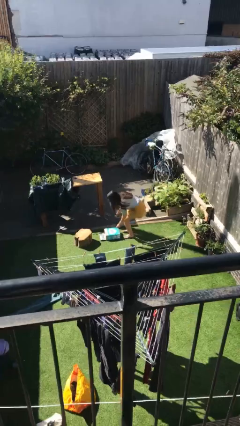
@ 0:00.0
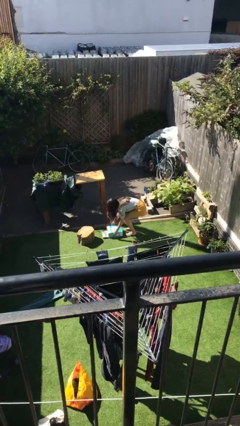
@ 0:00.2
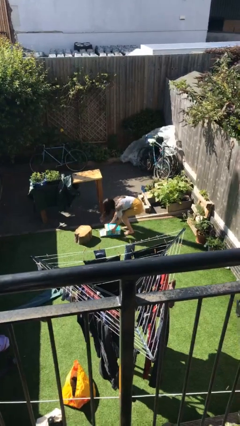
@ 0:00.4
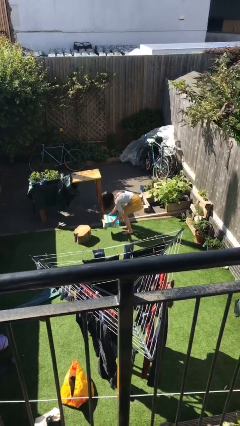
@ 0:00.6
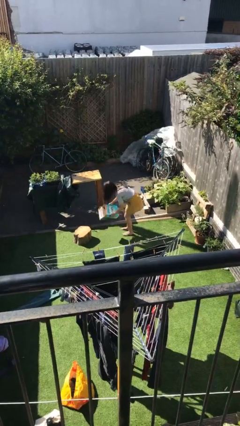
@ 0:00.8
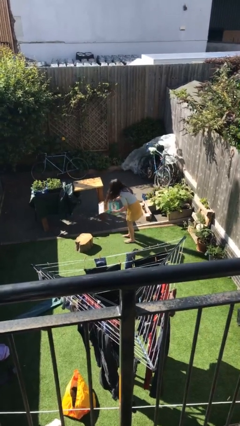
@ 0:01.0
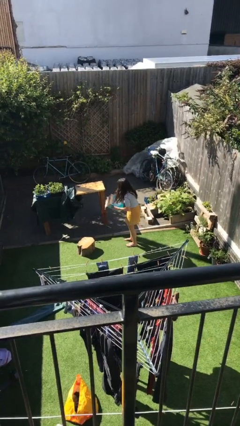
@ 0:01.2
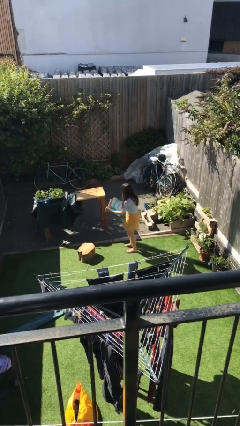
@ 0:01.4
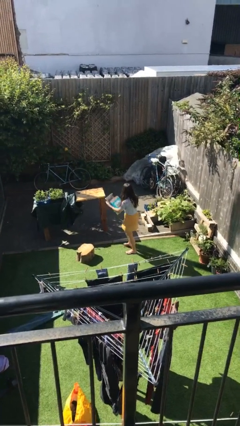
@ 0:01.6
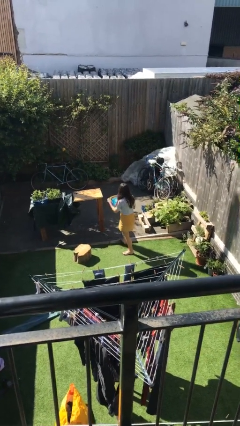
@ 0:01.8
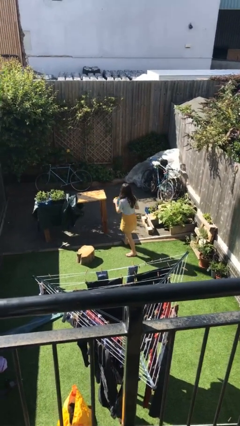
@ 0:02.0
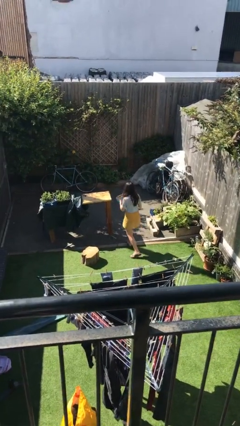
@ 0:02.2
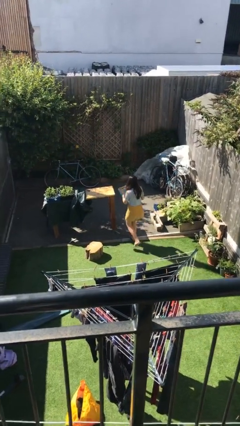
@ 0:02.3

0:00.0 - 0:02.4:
person picks up object from floor

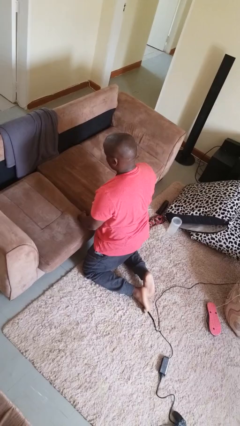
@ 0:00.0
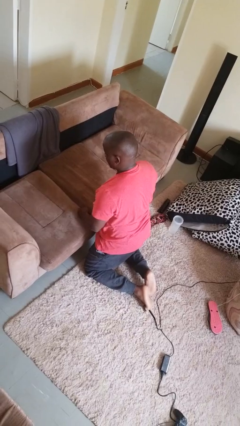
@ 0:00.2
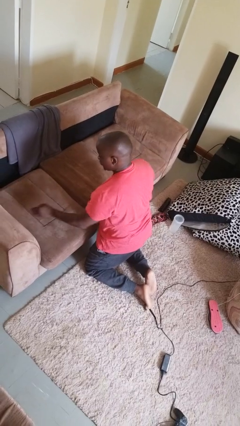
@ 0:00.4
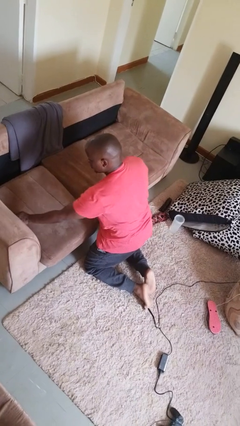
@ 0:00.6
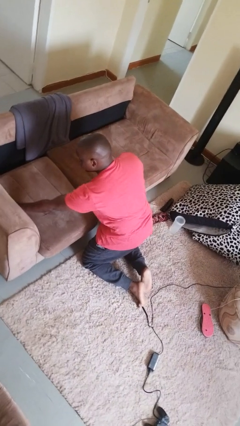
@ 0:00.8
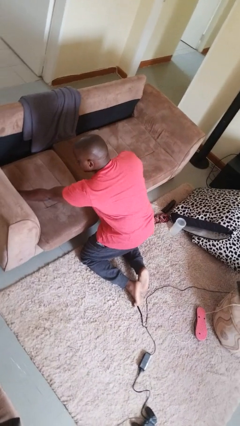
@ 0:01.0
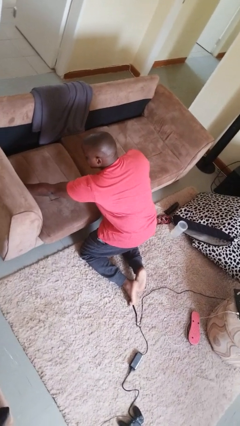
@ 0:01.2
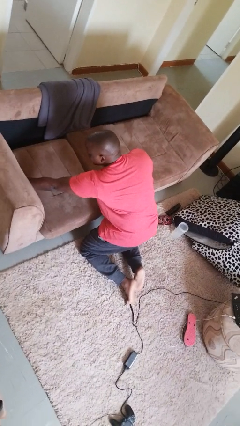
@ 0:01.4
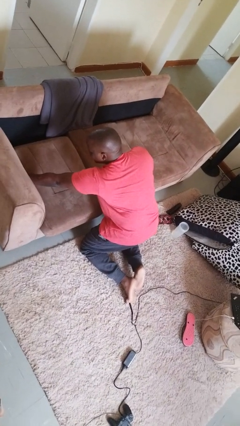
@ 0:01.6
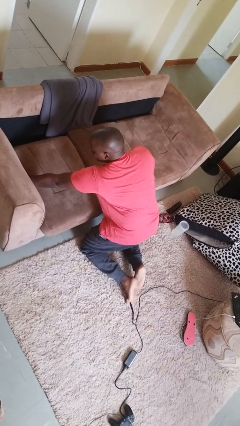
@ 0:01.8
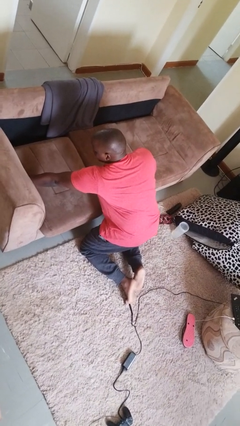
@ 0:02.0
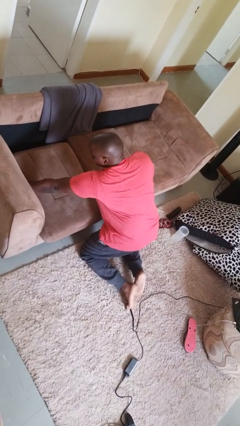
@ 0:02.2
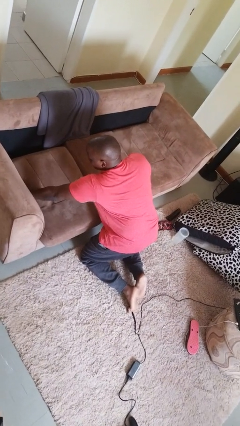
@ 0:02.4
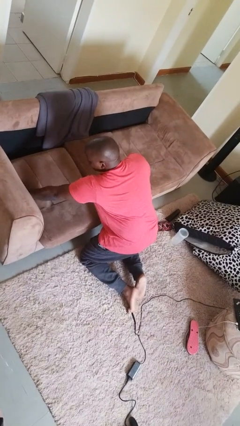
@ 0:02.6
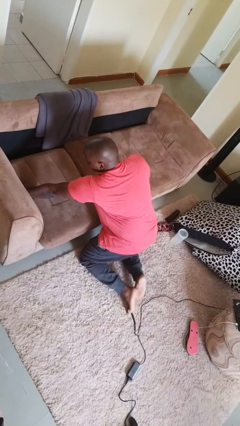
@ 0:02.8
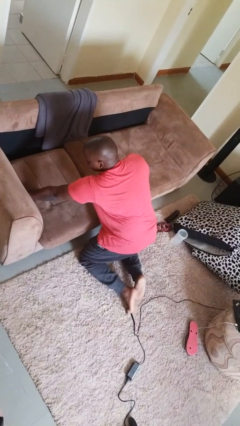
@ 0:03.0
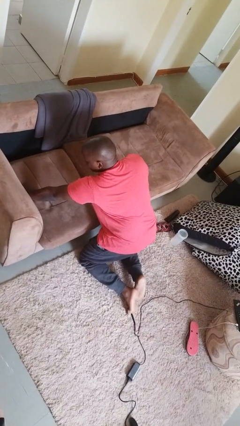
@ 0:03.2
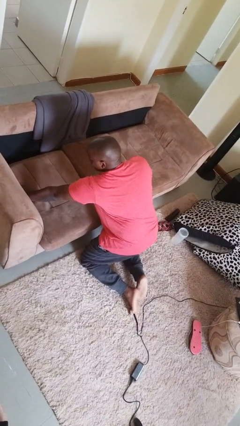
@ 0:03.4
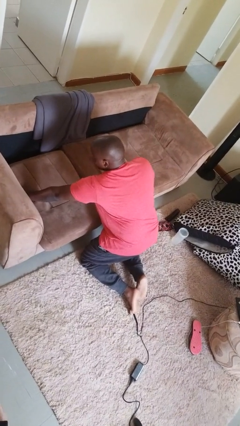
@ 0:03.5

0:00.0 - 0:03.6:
person searches in couch

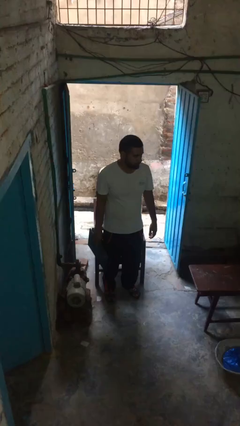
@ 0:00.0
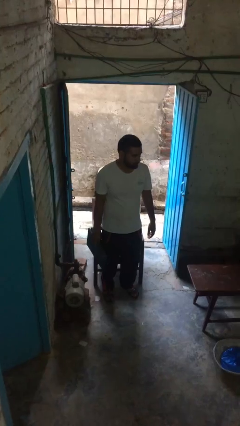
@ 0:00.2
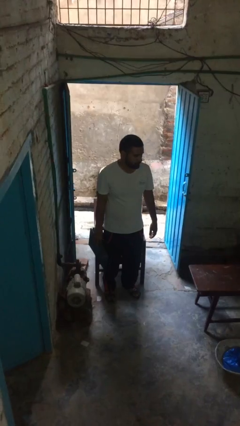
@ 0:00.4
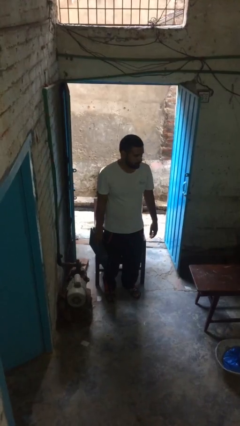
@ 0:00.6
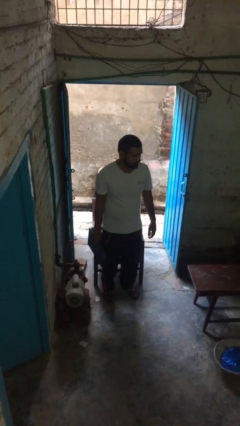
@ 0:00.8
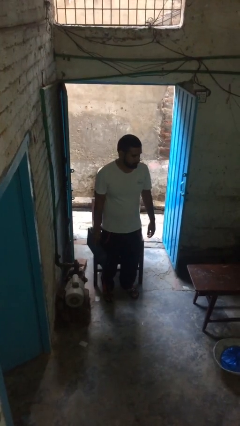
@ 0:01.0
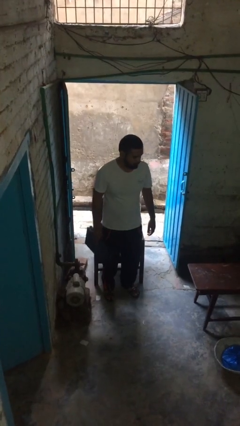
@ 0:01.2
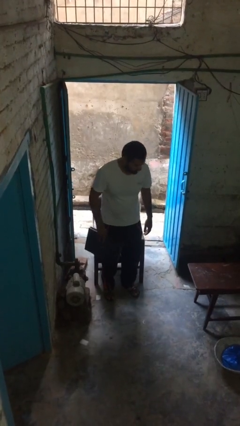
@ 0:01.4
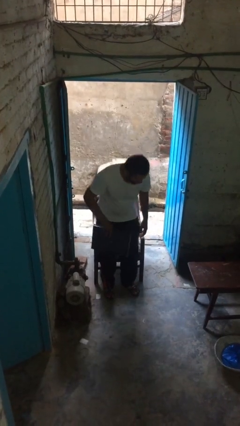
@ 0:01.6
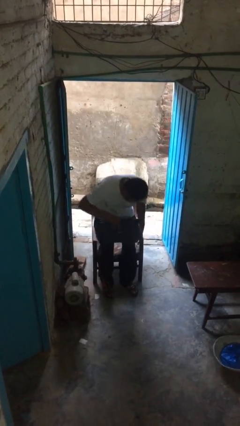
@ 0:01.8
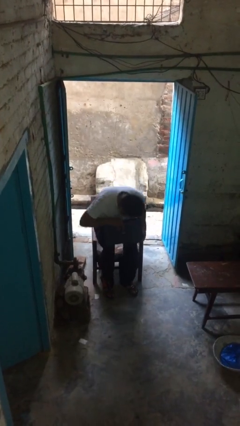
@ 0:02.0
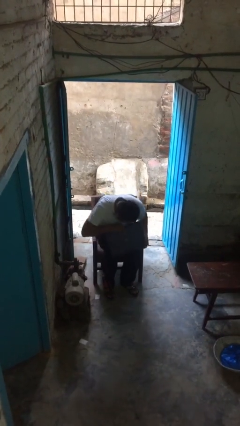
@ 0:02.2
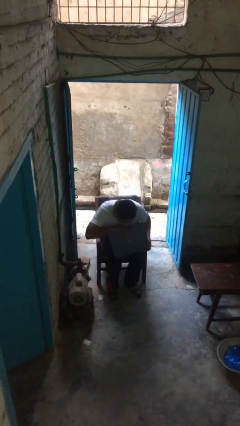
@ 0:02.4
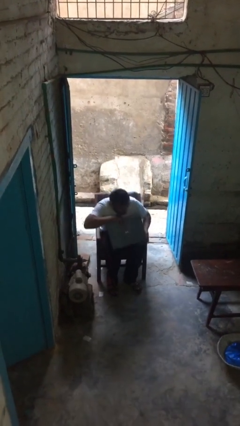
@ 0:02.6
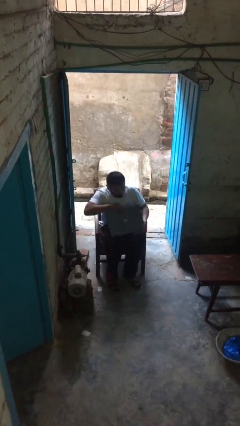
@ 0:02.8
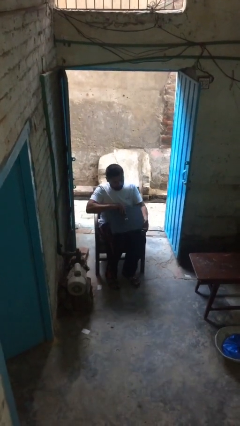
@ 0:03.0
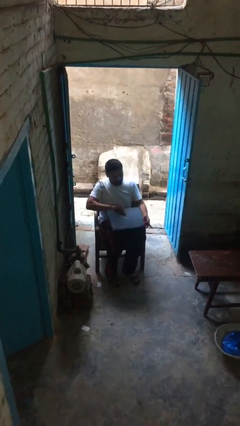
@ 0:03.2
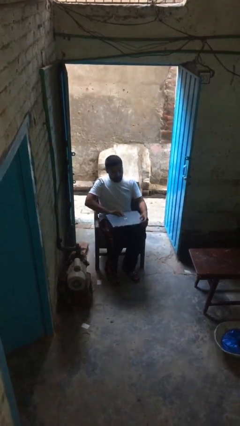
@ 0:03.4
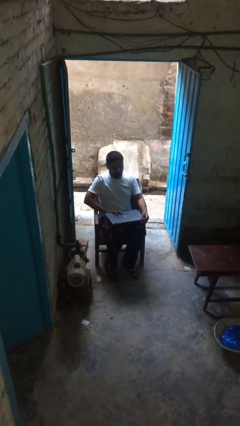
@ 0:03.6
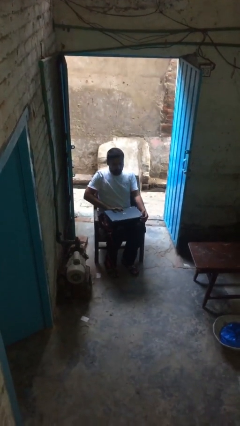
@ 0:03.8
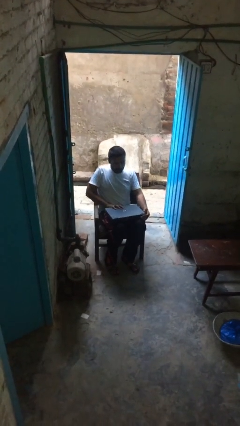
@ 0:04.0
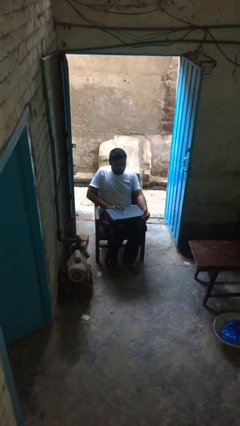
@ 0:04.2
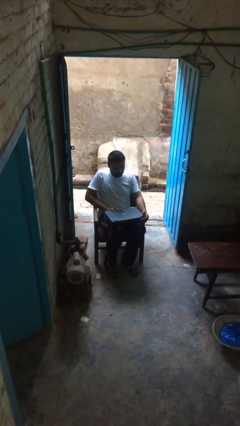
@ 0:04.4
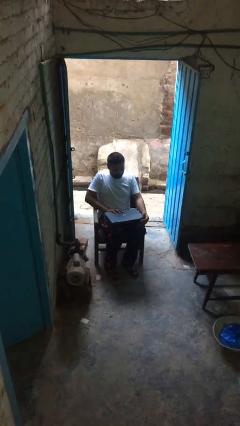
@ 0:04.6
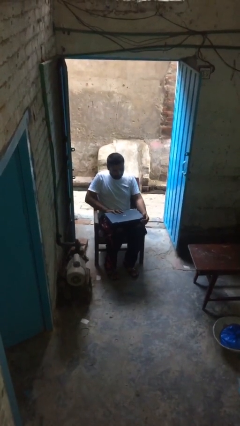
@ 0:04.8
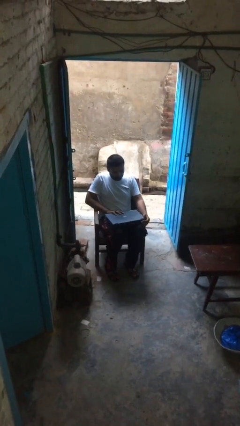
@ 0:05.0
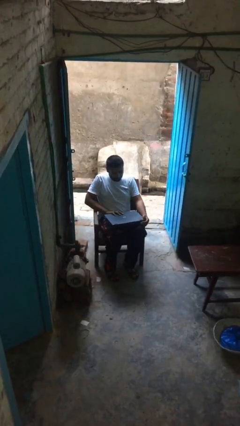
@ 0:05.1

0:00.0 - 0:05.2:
person sits down

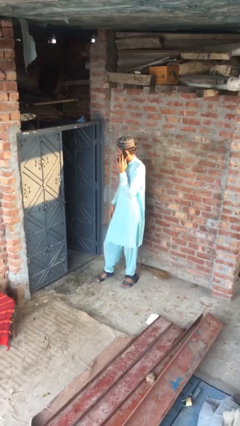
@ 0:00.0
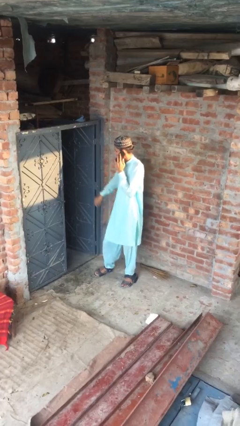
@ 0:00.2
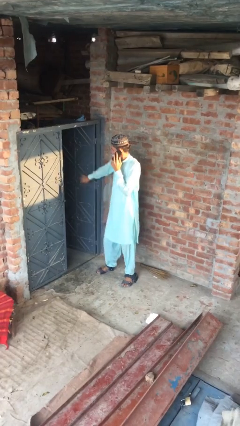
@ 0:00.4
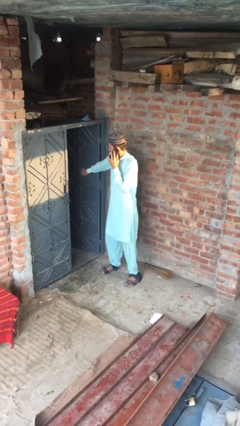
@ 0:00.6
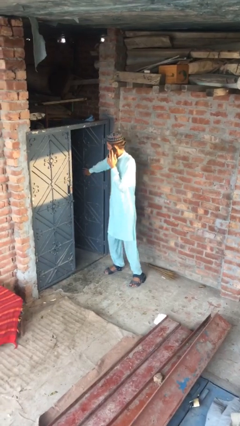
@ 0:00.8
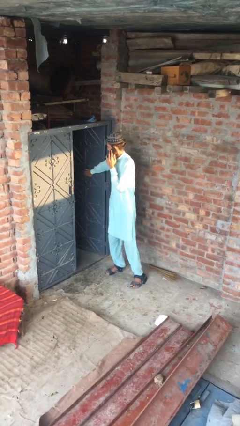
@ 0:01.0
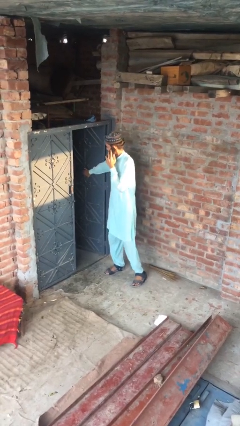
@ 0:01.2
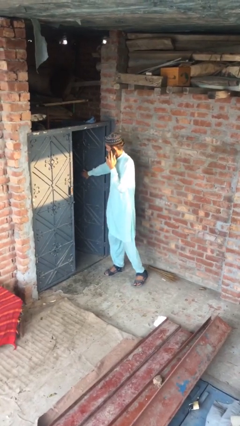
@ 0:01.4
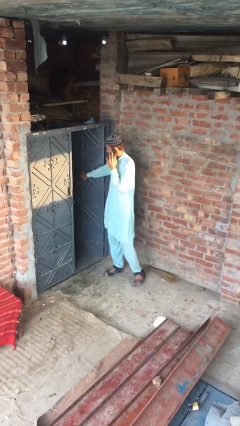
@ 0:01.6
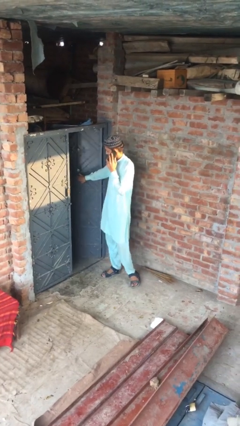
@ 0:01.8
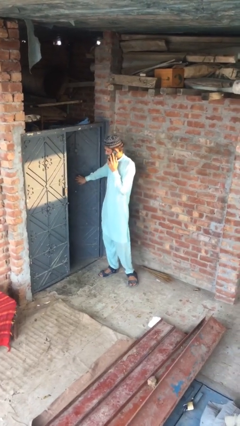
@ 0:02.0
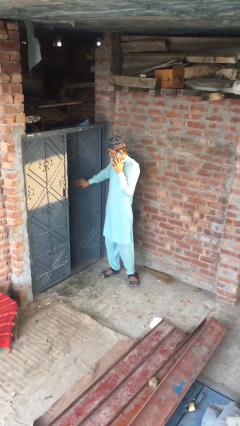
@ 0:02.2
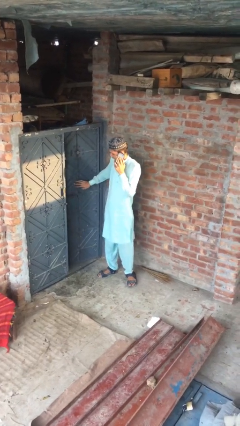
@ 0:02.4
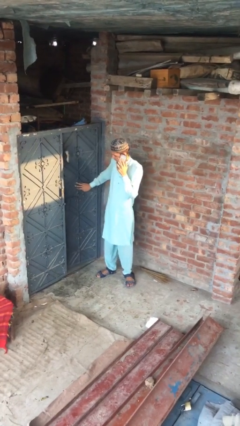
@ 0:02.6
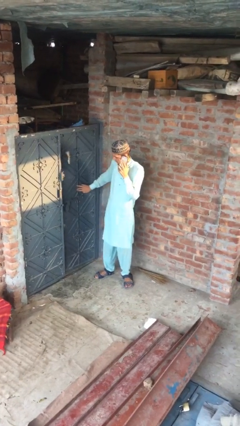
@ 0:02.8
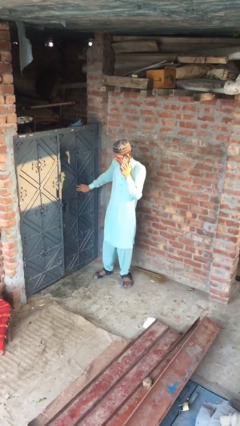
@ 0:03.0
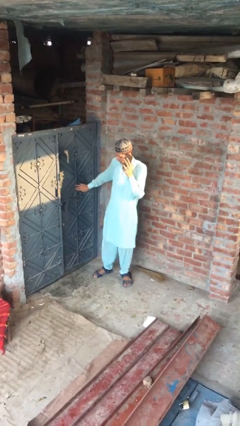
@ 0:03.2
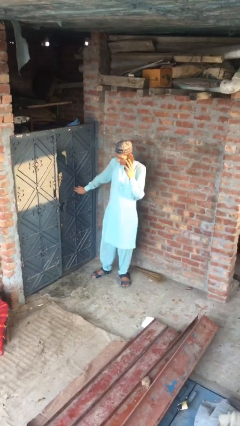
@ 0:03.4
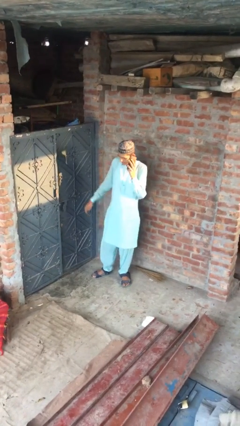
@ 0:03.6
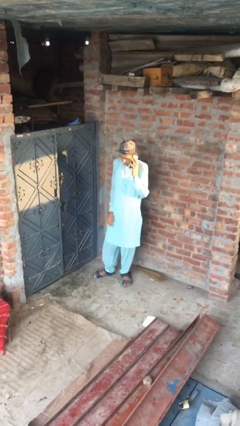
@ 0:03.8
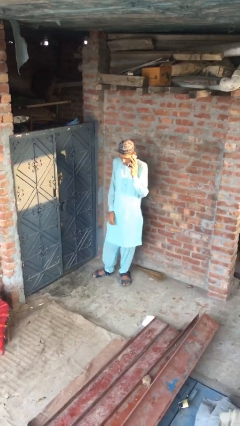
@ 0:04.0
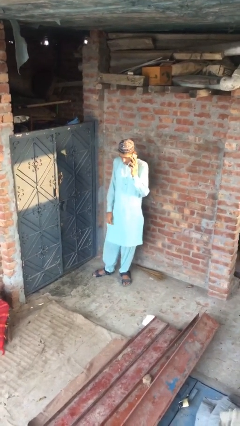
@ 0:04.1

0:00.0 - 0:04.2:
person closes facility door

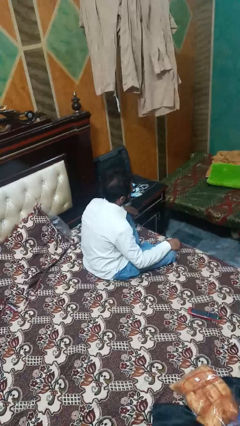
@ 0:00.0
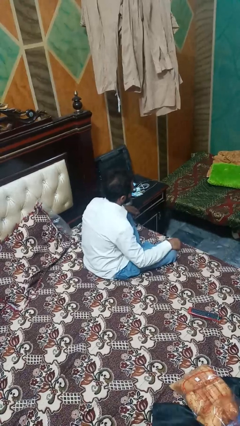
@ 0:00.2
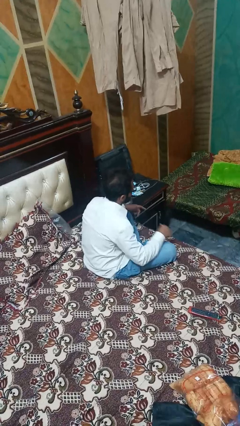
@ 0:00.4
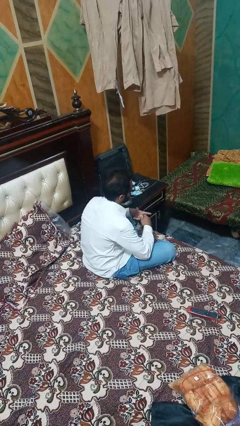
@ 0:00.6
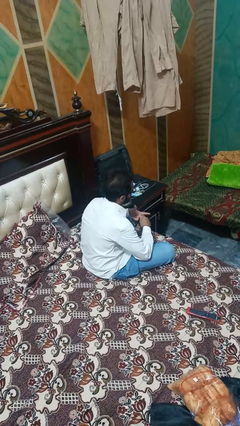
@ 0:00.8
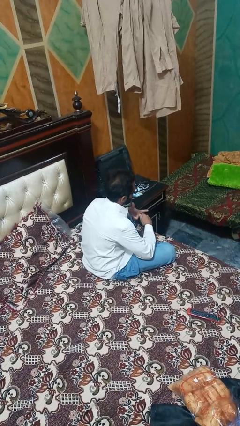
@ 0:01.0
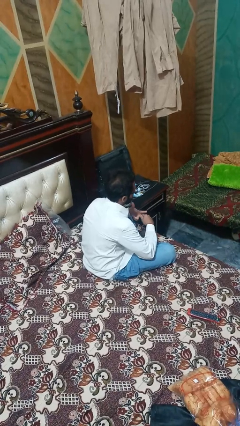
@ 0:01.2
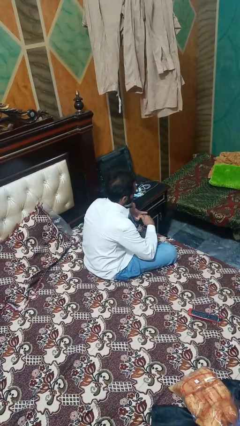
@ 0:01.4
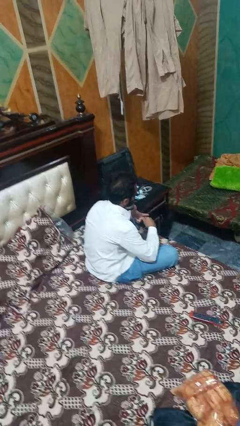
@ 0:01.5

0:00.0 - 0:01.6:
person snaps fingers

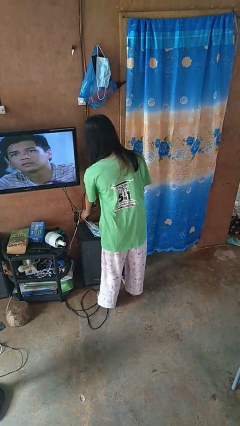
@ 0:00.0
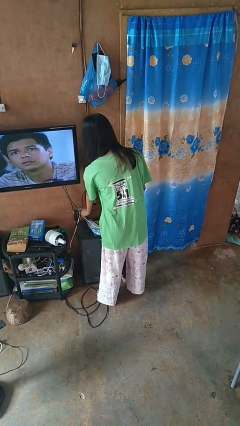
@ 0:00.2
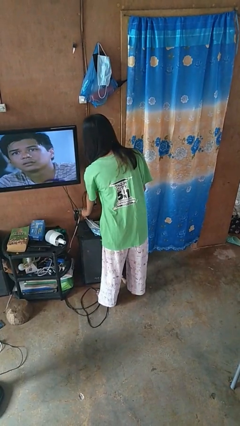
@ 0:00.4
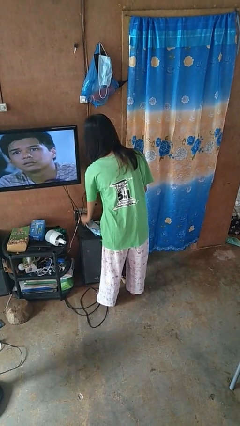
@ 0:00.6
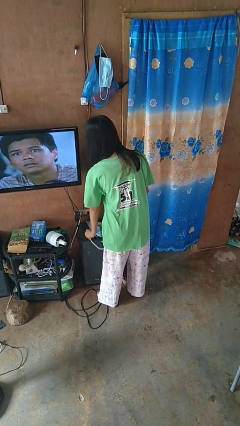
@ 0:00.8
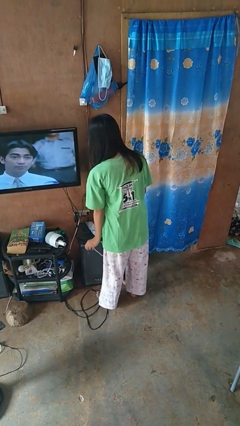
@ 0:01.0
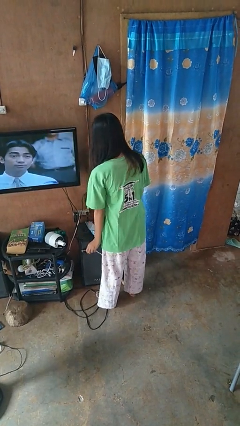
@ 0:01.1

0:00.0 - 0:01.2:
person unplugs from electrical socket
